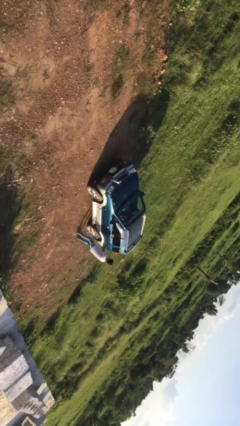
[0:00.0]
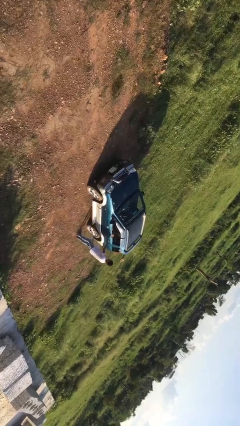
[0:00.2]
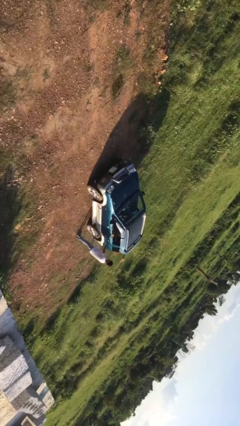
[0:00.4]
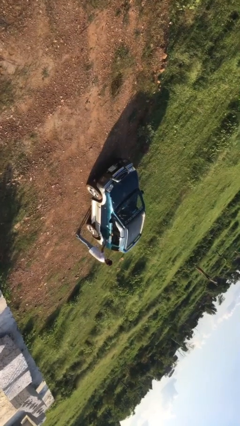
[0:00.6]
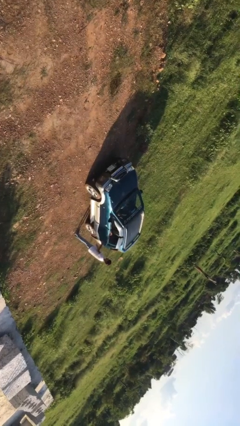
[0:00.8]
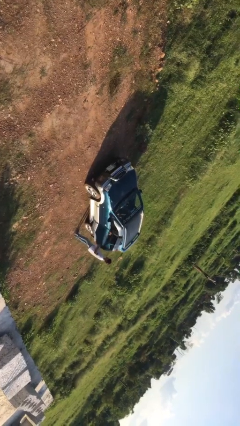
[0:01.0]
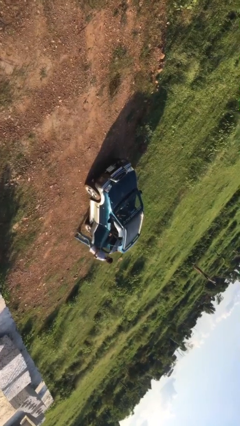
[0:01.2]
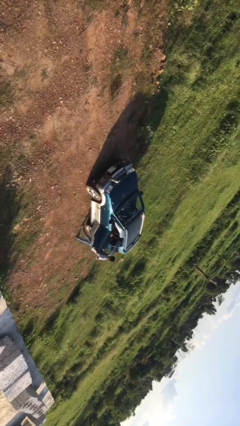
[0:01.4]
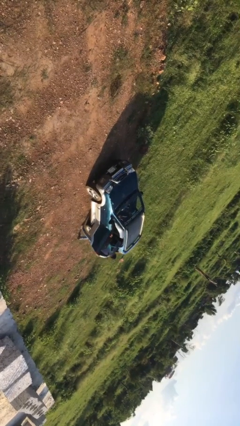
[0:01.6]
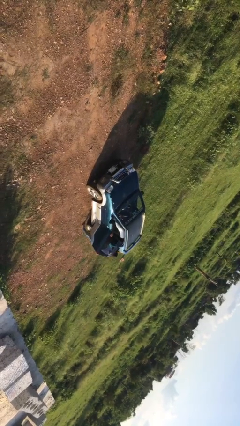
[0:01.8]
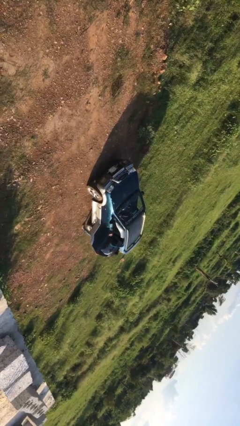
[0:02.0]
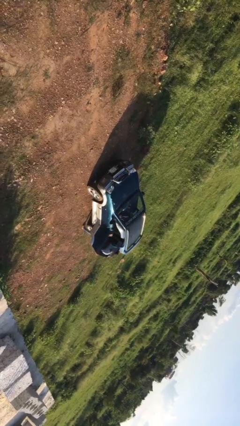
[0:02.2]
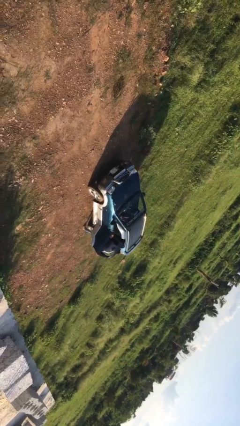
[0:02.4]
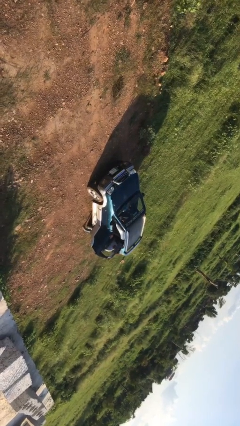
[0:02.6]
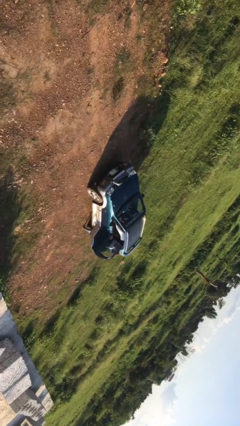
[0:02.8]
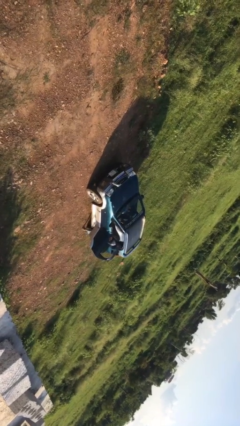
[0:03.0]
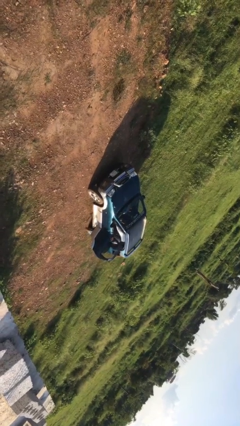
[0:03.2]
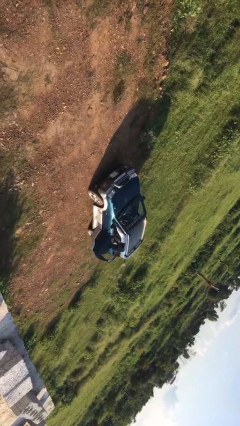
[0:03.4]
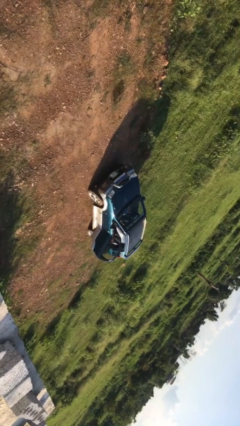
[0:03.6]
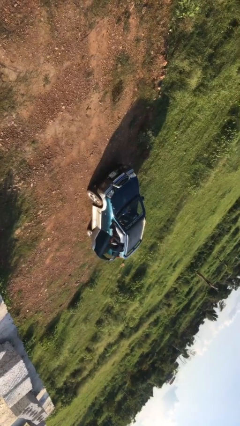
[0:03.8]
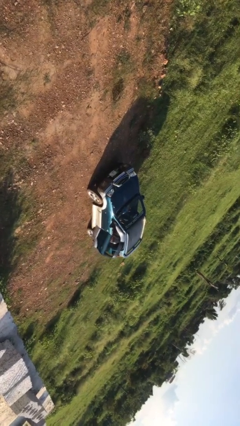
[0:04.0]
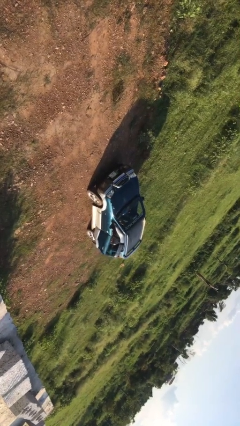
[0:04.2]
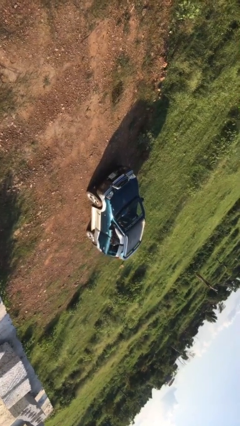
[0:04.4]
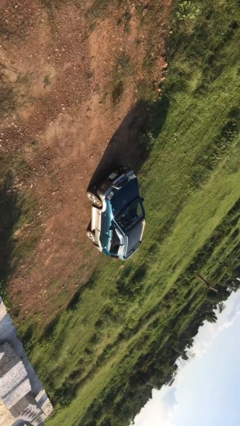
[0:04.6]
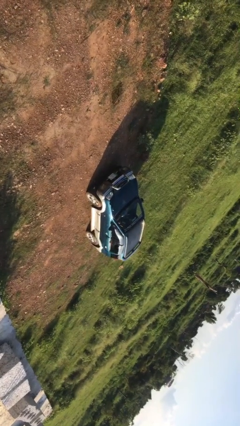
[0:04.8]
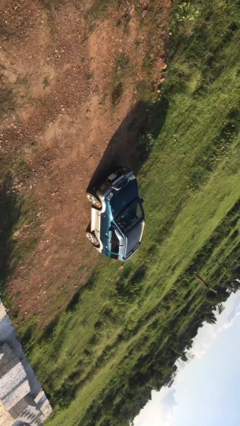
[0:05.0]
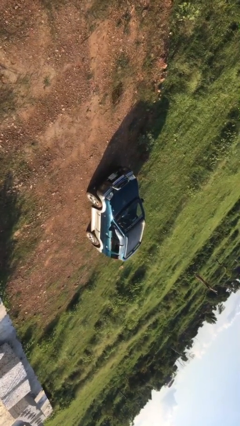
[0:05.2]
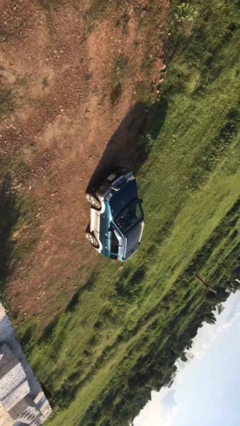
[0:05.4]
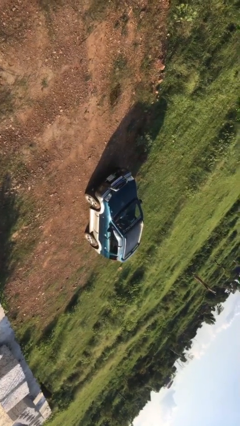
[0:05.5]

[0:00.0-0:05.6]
car picks up person

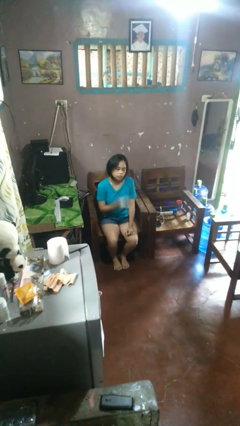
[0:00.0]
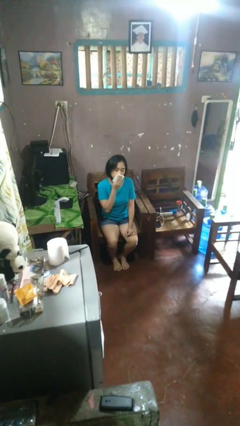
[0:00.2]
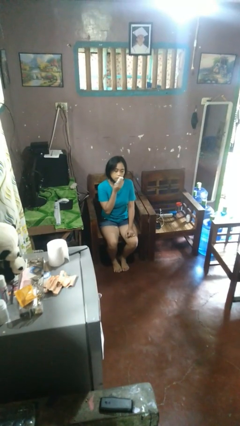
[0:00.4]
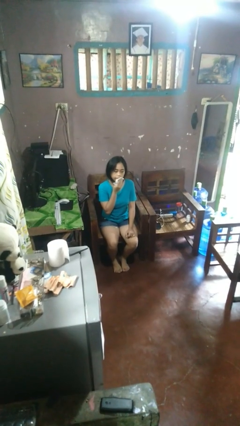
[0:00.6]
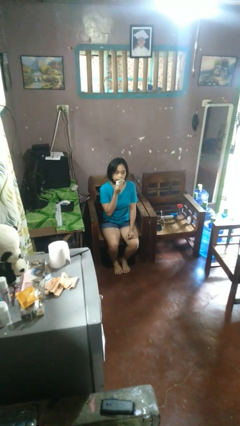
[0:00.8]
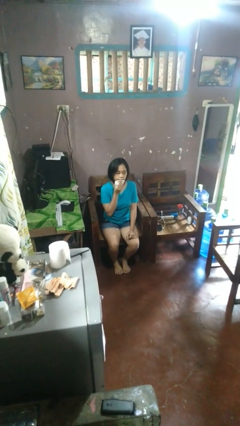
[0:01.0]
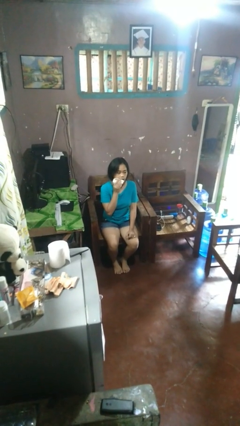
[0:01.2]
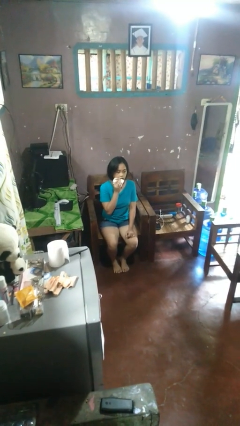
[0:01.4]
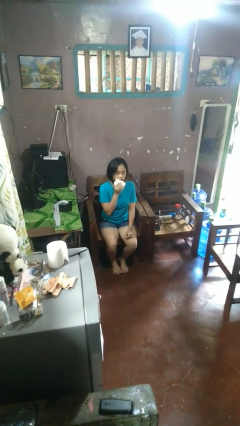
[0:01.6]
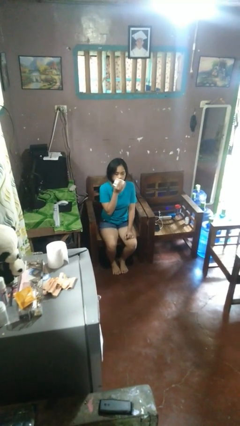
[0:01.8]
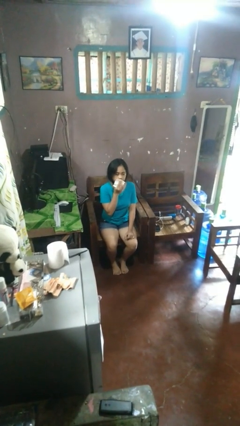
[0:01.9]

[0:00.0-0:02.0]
person wipes mouth with napkin

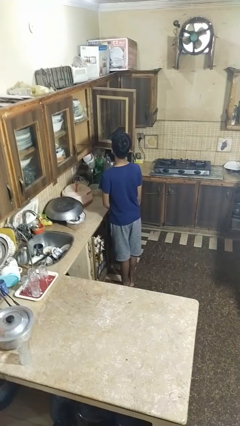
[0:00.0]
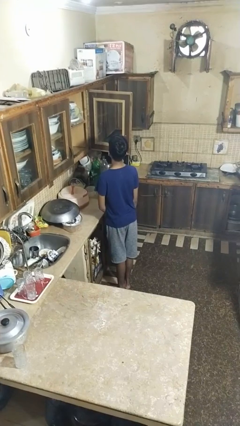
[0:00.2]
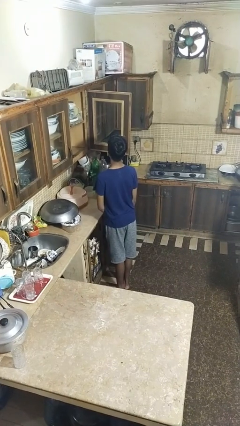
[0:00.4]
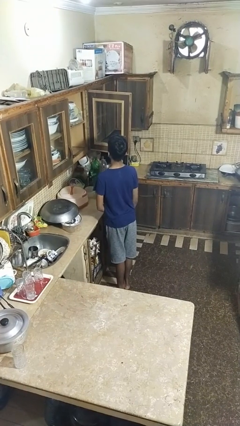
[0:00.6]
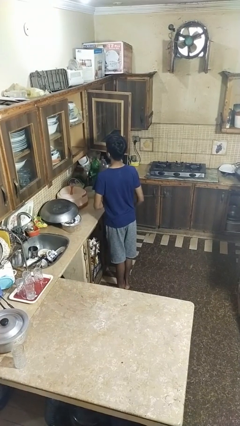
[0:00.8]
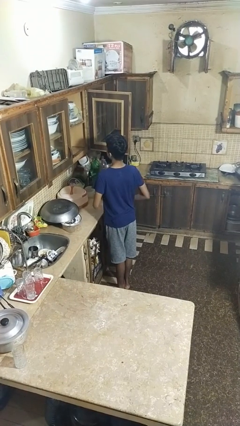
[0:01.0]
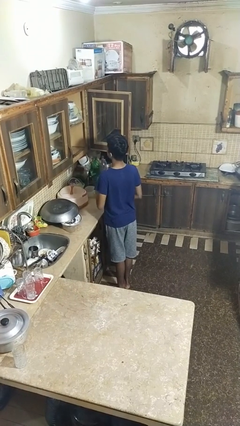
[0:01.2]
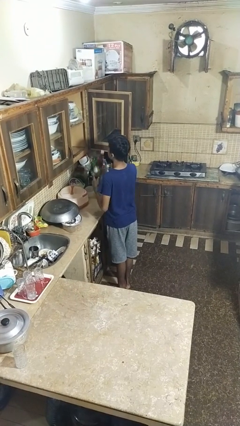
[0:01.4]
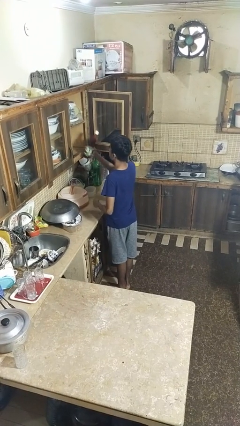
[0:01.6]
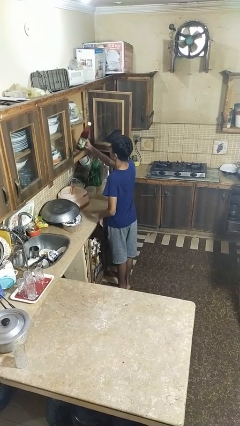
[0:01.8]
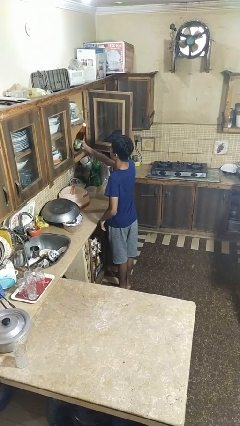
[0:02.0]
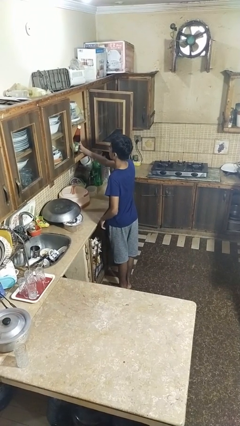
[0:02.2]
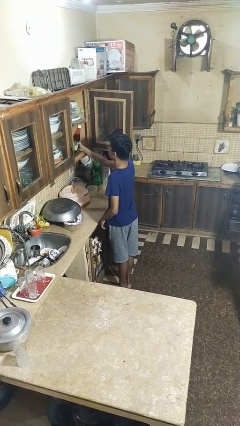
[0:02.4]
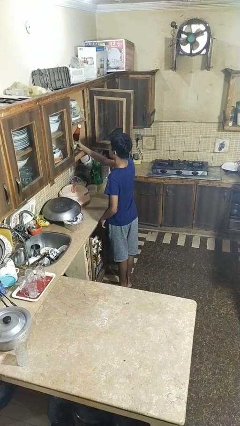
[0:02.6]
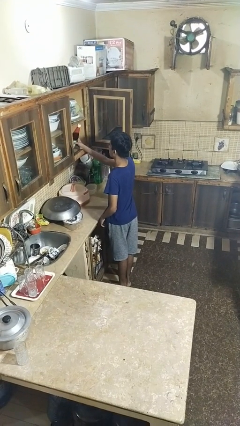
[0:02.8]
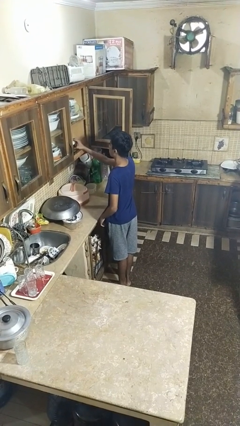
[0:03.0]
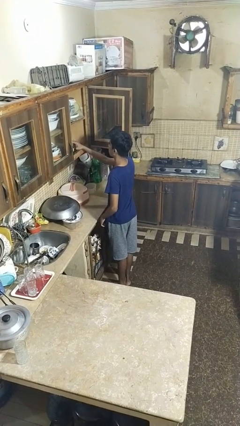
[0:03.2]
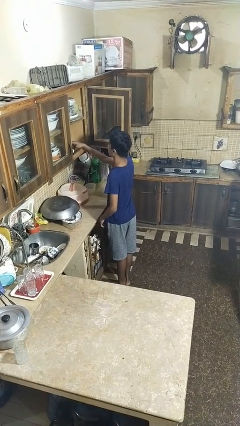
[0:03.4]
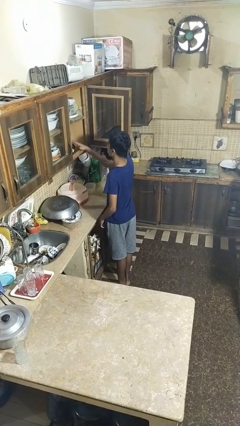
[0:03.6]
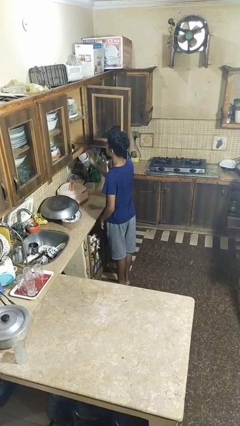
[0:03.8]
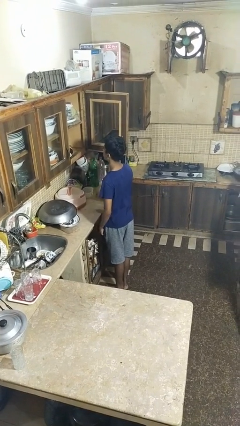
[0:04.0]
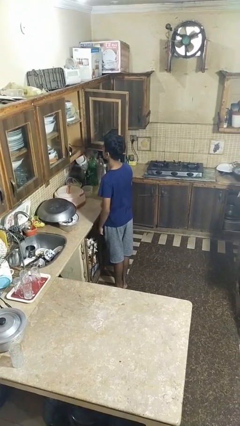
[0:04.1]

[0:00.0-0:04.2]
person puts object in cabinet

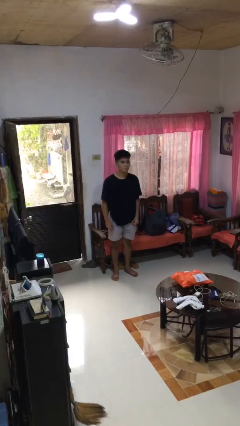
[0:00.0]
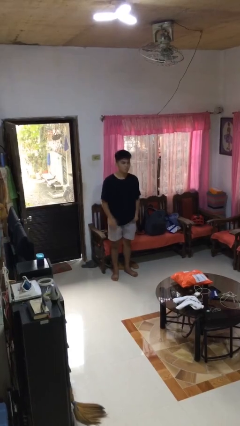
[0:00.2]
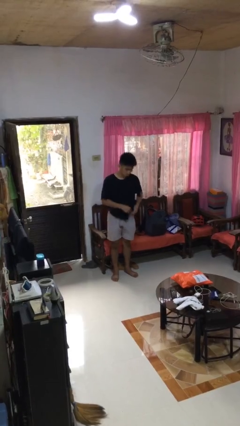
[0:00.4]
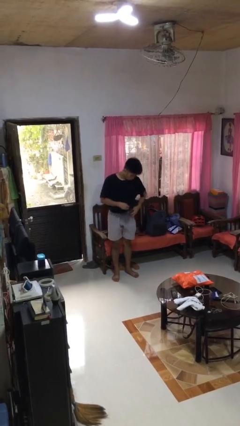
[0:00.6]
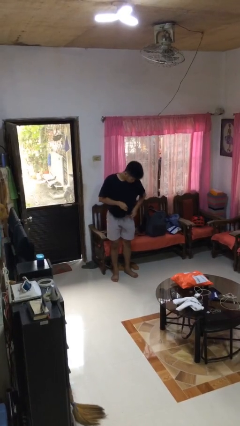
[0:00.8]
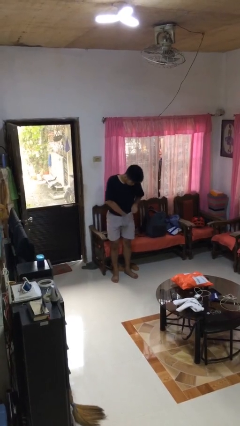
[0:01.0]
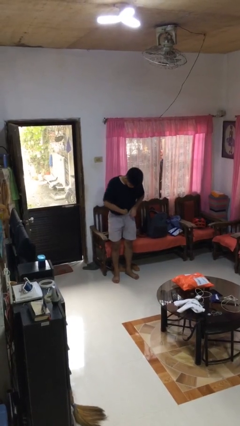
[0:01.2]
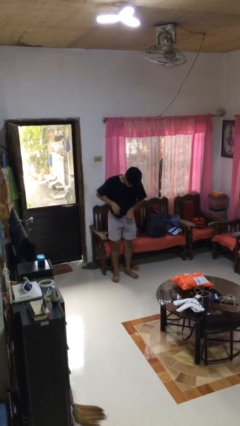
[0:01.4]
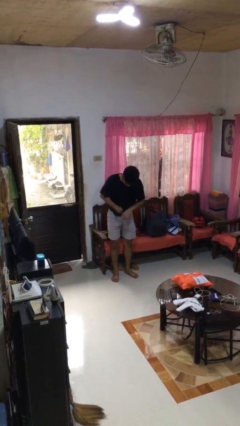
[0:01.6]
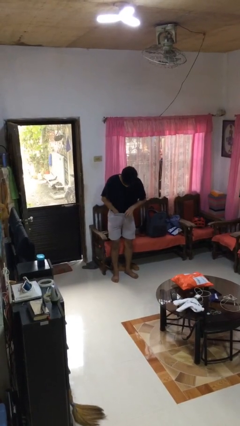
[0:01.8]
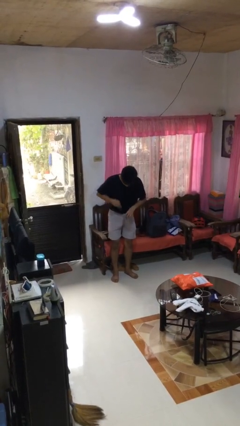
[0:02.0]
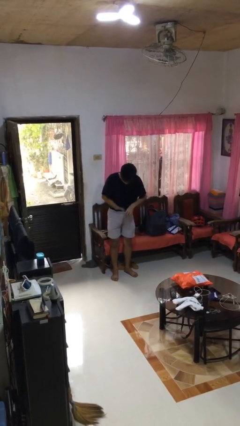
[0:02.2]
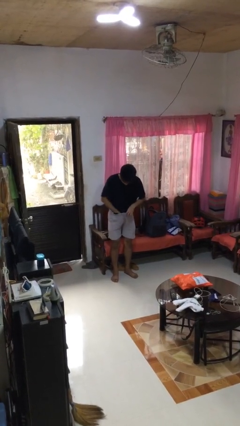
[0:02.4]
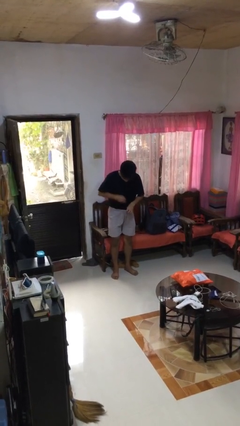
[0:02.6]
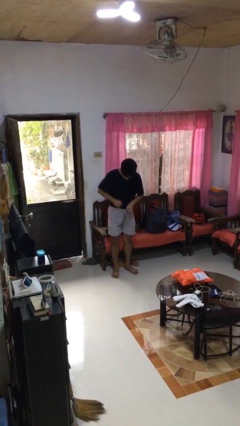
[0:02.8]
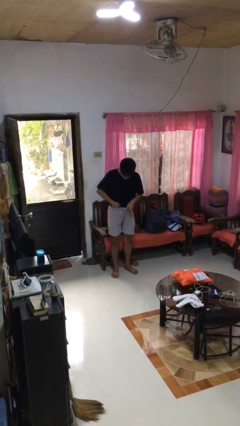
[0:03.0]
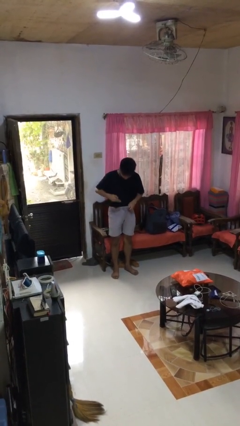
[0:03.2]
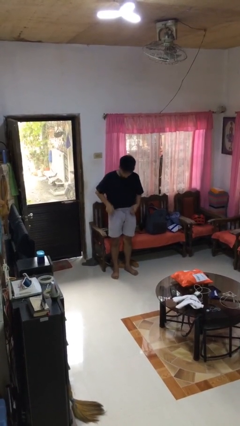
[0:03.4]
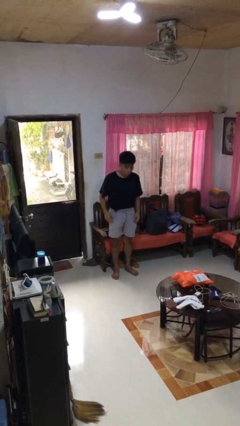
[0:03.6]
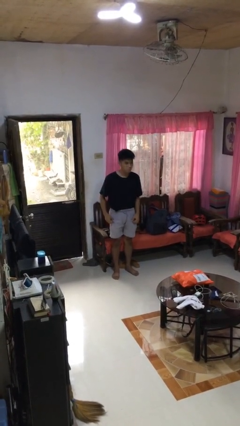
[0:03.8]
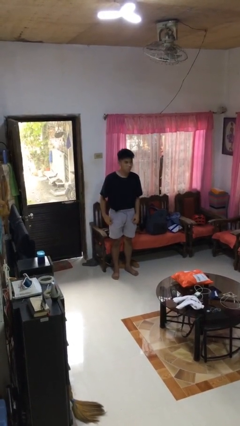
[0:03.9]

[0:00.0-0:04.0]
person tucks in shirt

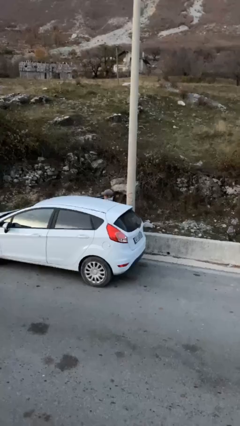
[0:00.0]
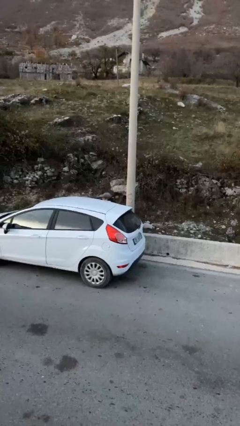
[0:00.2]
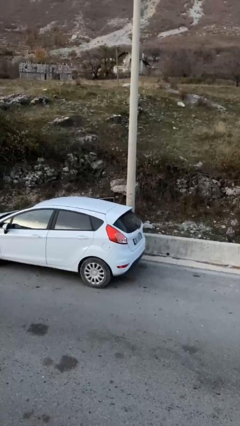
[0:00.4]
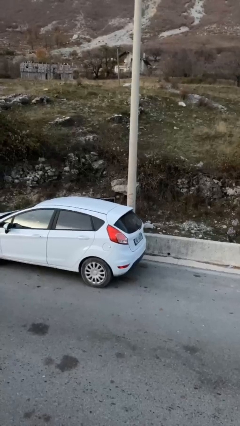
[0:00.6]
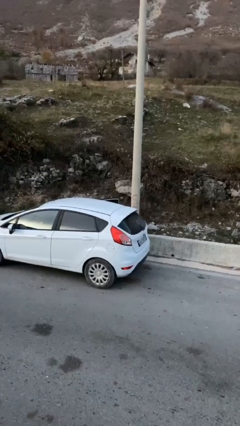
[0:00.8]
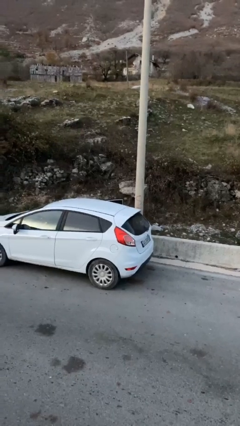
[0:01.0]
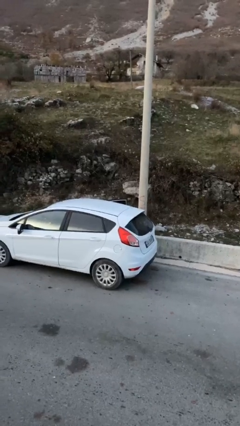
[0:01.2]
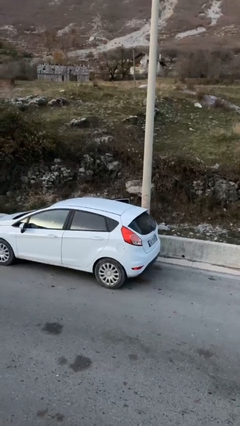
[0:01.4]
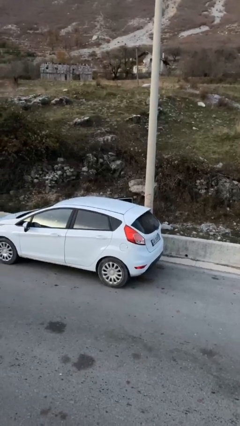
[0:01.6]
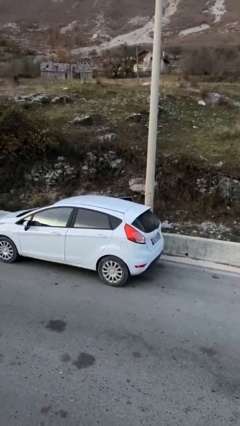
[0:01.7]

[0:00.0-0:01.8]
person enters car

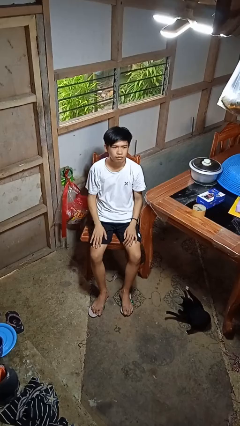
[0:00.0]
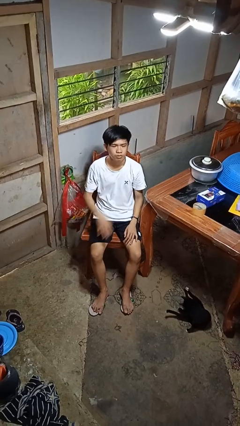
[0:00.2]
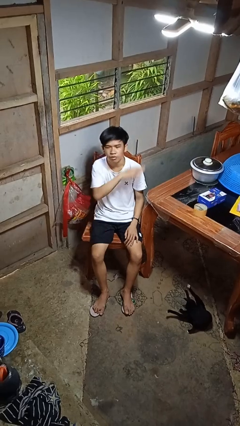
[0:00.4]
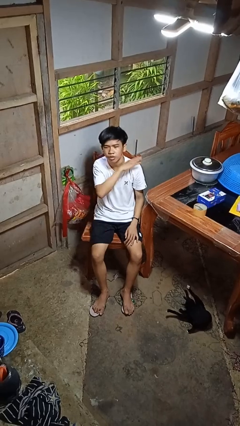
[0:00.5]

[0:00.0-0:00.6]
person gestures cut
